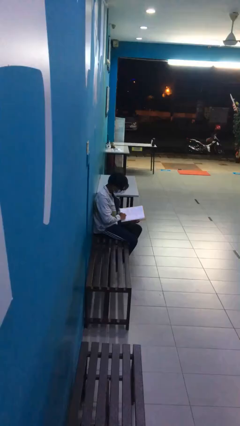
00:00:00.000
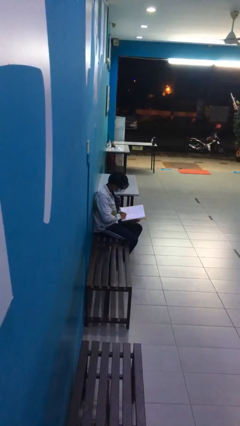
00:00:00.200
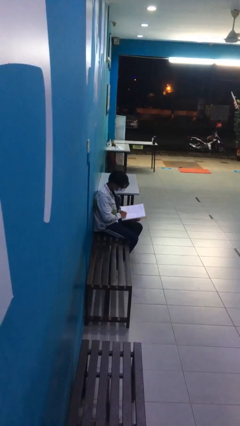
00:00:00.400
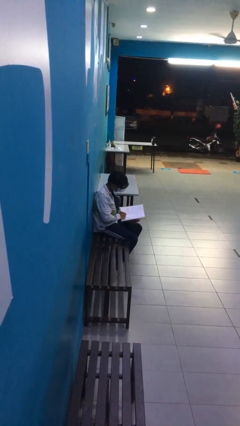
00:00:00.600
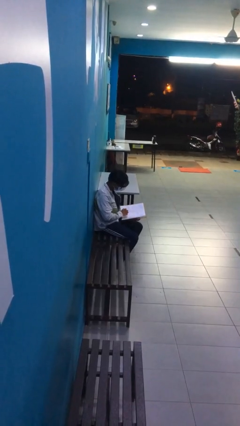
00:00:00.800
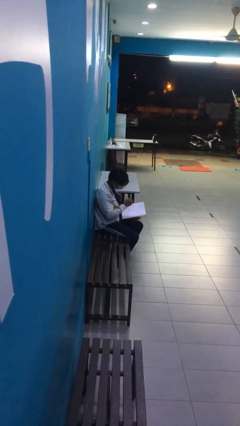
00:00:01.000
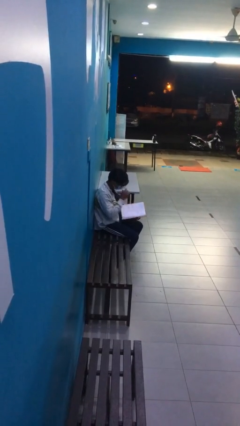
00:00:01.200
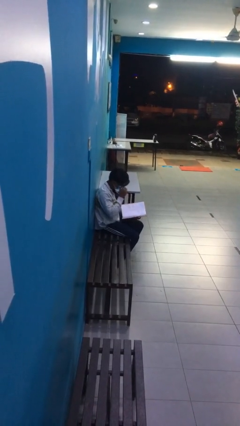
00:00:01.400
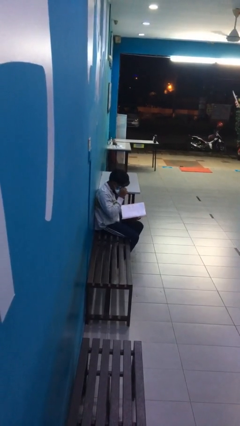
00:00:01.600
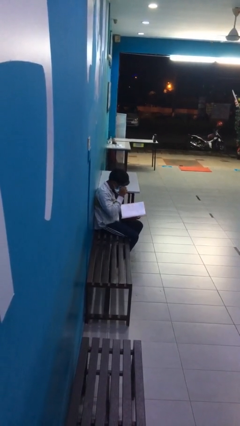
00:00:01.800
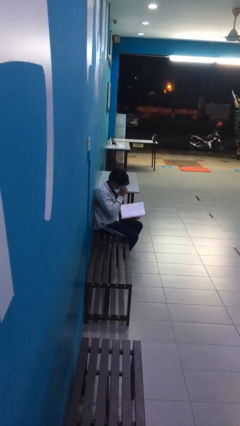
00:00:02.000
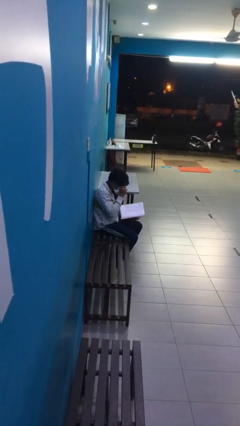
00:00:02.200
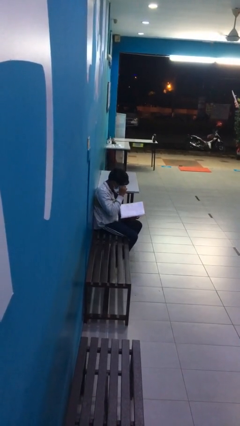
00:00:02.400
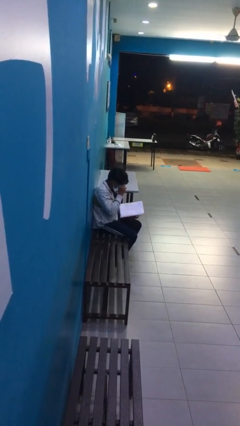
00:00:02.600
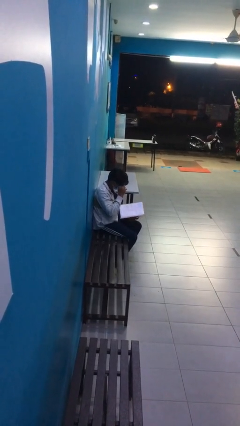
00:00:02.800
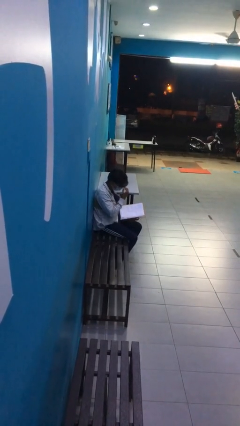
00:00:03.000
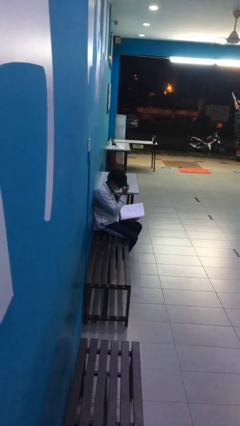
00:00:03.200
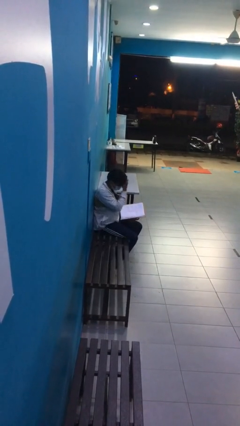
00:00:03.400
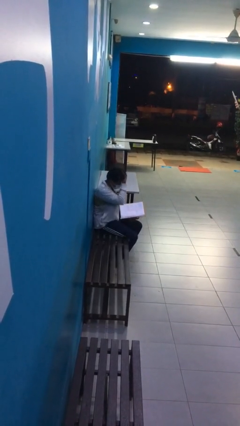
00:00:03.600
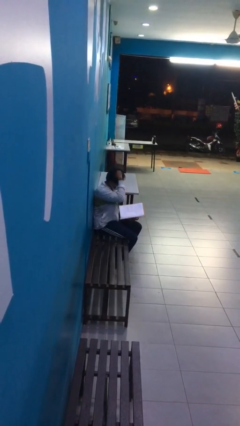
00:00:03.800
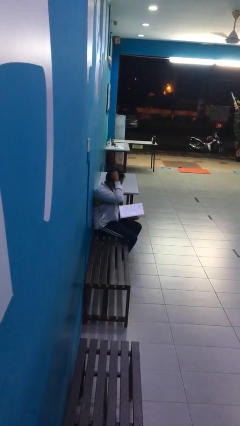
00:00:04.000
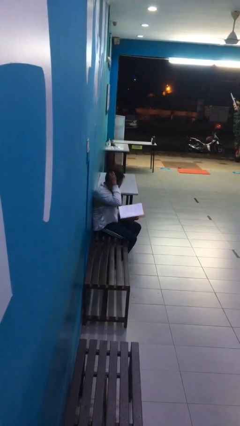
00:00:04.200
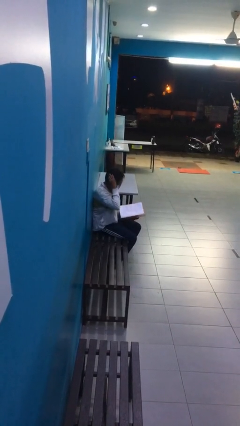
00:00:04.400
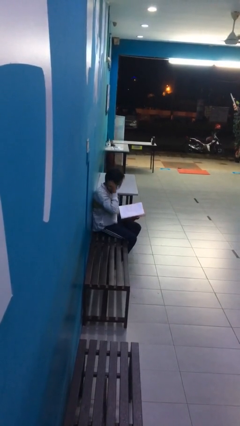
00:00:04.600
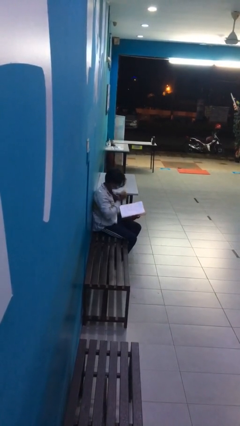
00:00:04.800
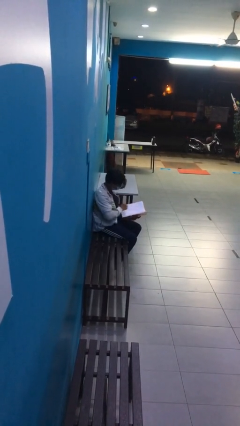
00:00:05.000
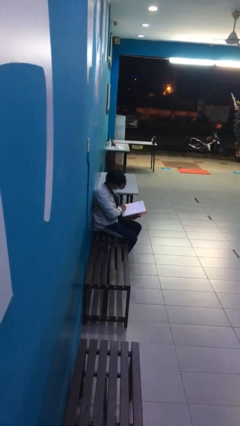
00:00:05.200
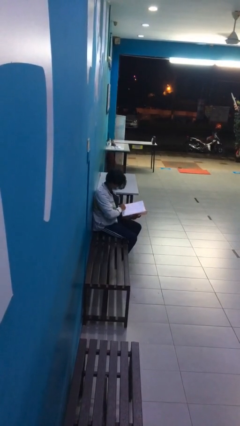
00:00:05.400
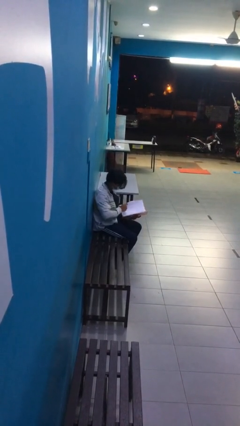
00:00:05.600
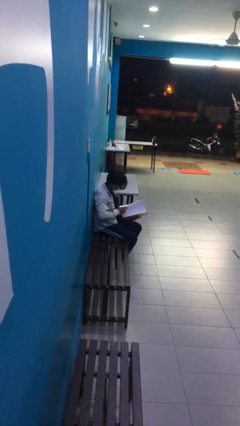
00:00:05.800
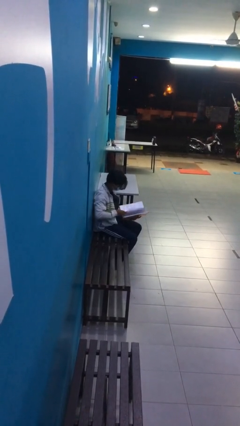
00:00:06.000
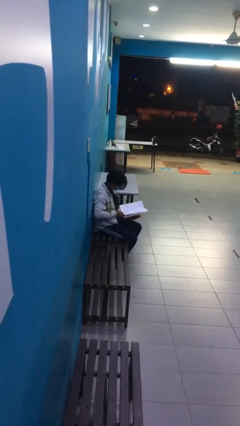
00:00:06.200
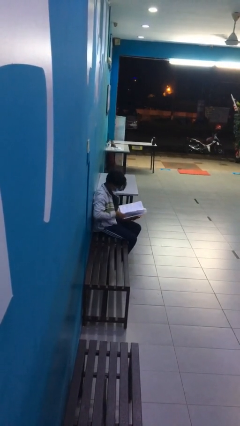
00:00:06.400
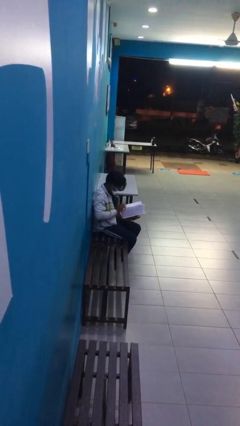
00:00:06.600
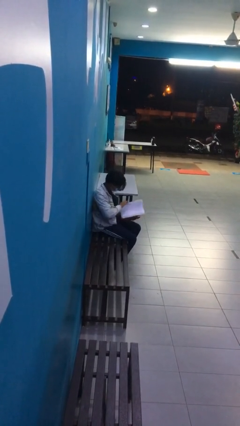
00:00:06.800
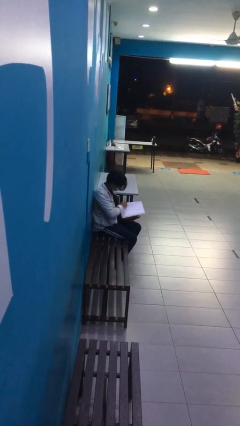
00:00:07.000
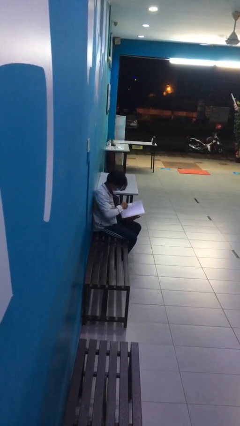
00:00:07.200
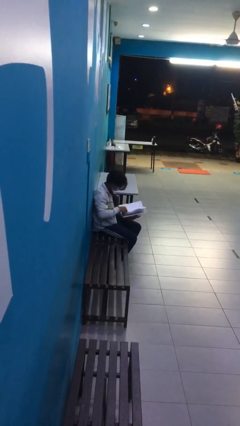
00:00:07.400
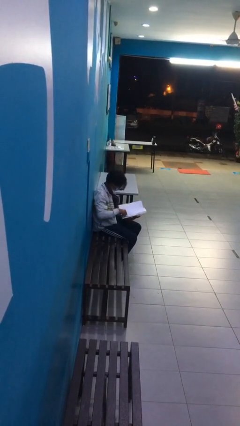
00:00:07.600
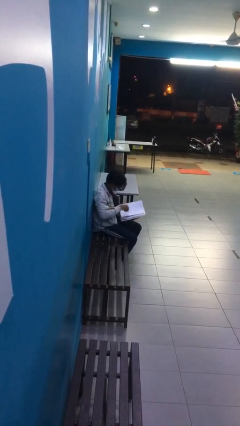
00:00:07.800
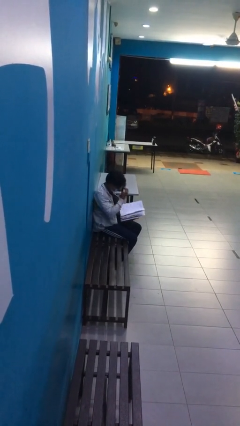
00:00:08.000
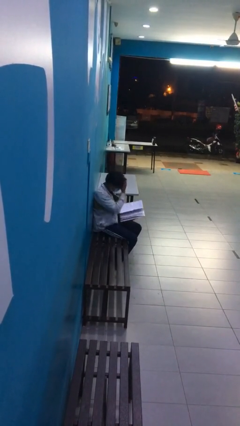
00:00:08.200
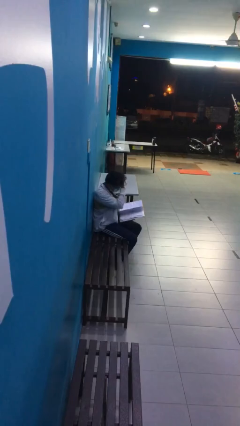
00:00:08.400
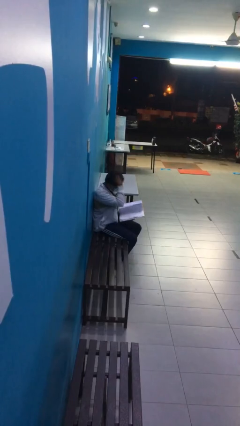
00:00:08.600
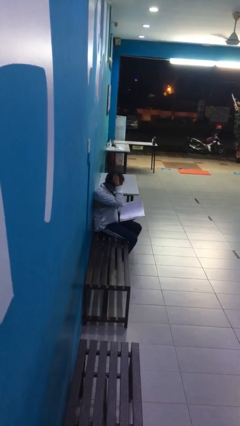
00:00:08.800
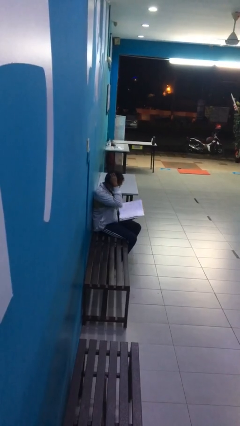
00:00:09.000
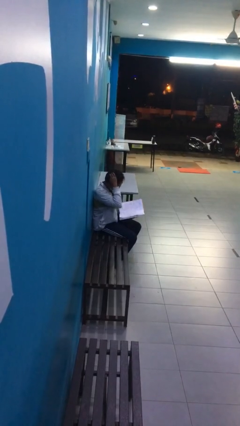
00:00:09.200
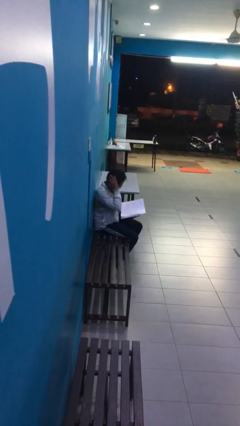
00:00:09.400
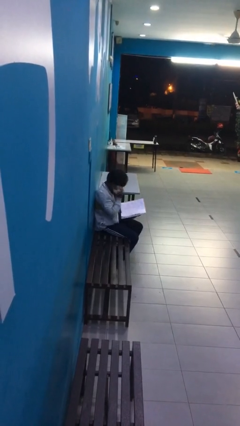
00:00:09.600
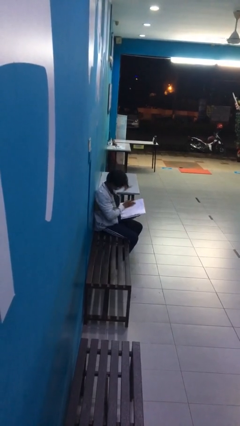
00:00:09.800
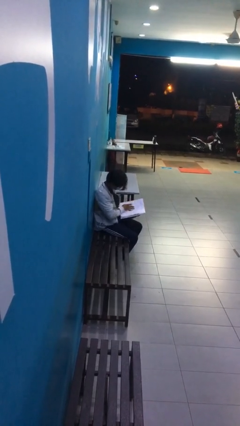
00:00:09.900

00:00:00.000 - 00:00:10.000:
person reads document

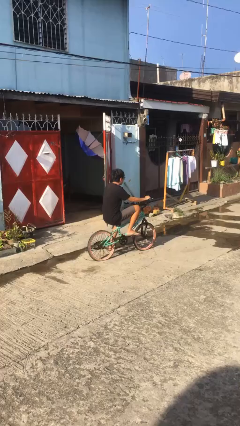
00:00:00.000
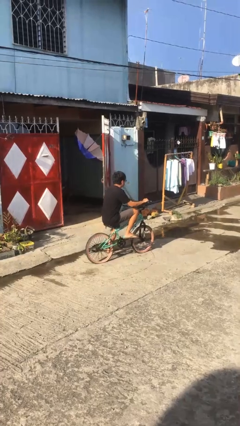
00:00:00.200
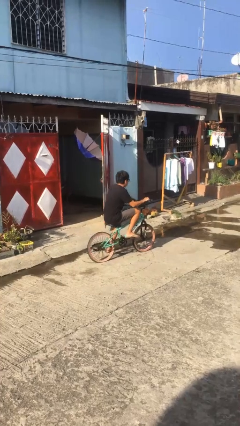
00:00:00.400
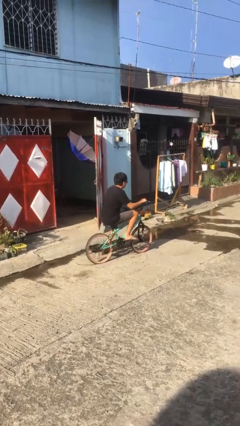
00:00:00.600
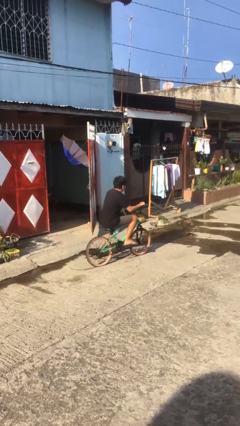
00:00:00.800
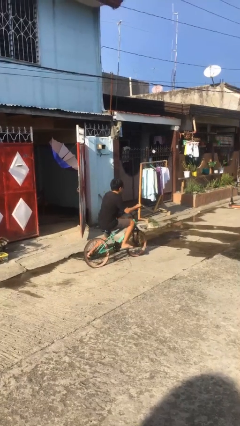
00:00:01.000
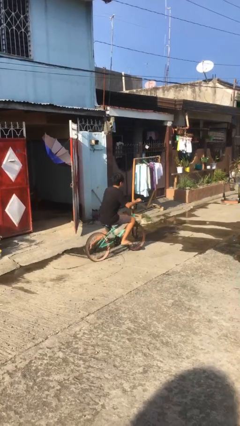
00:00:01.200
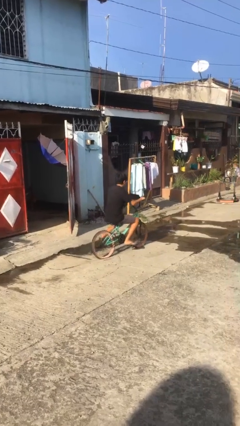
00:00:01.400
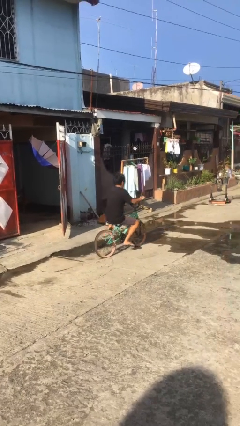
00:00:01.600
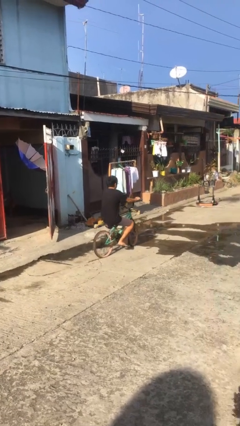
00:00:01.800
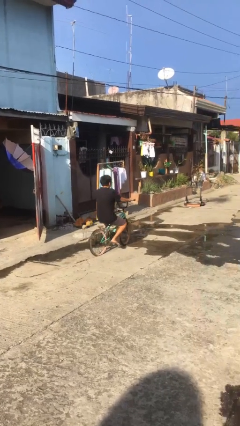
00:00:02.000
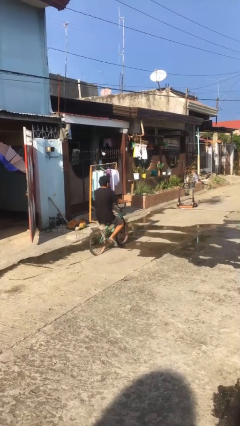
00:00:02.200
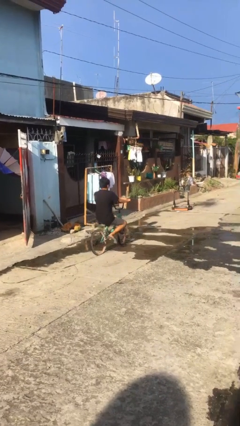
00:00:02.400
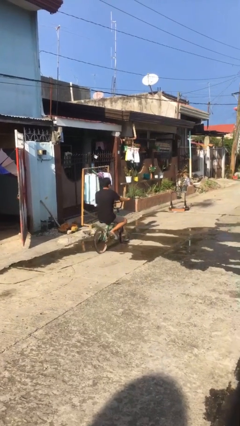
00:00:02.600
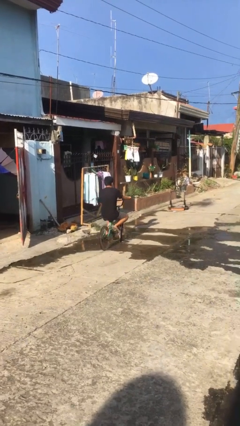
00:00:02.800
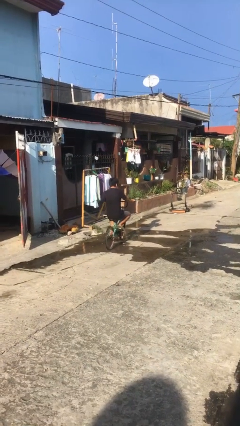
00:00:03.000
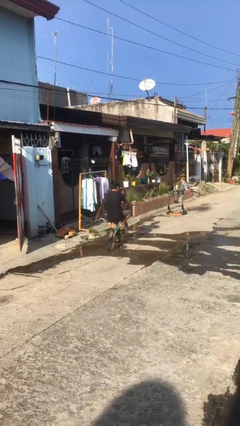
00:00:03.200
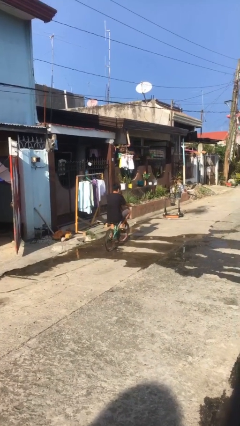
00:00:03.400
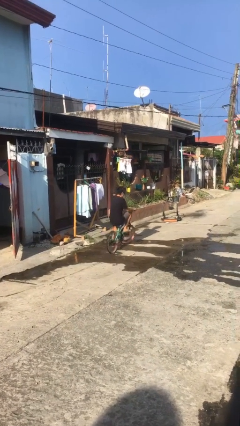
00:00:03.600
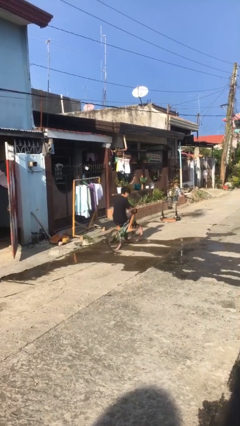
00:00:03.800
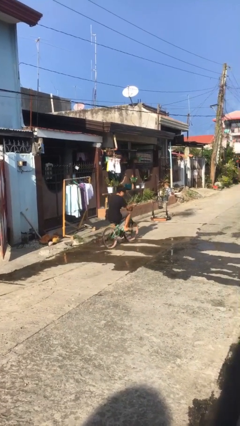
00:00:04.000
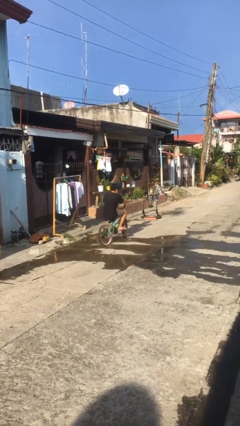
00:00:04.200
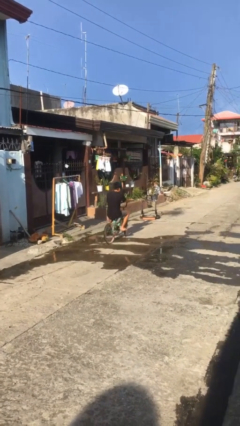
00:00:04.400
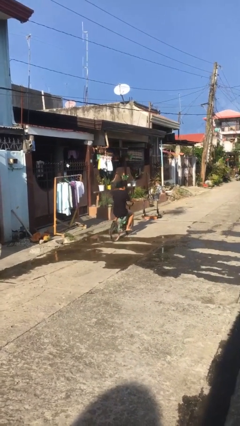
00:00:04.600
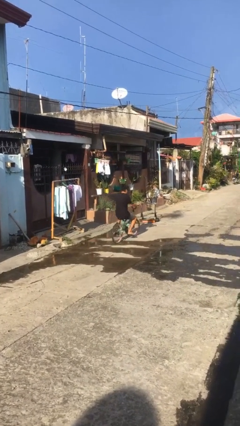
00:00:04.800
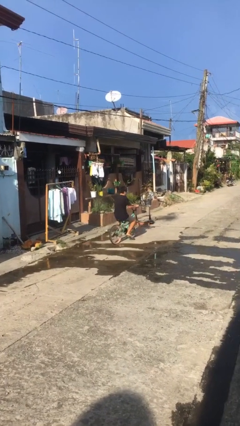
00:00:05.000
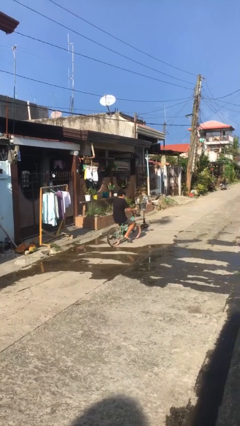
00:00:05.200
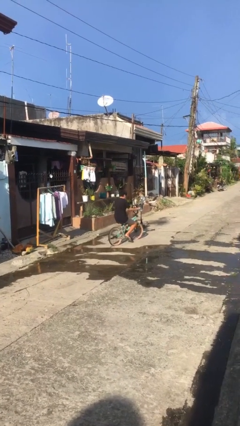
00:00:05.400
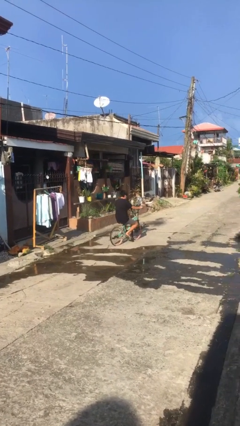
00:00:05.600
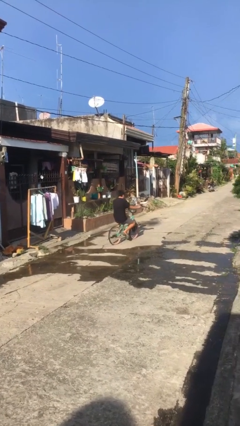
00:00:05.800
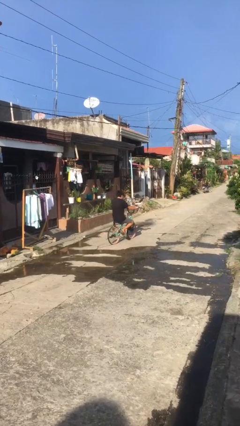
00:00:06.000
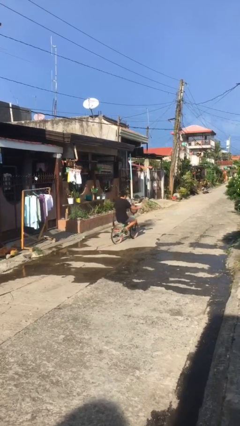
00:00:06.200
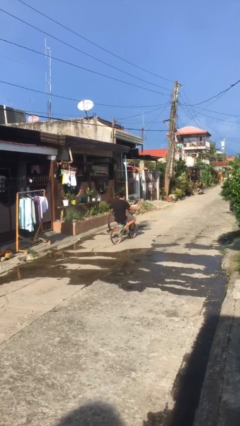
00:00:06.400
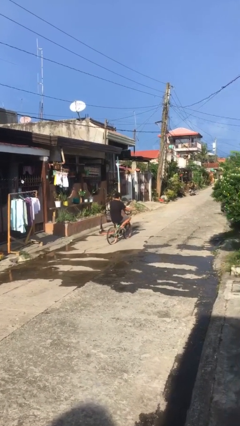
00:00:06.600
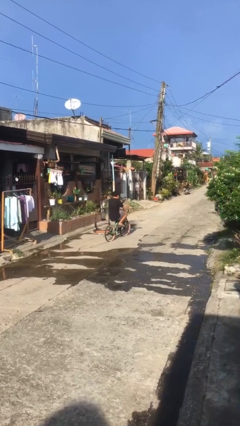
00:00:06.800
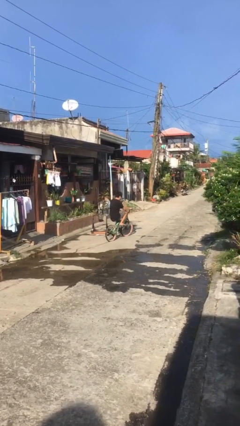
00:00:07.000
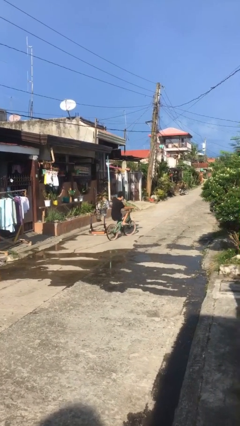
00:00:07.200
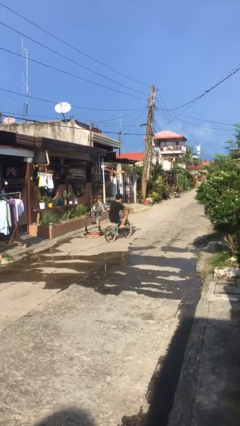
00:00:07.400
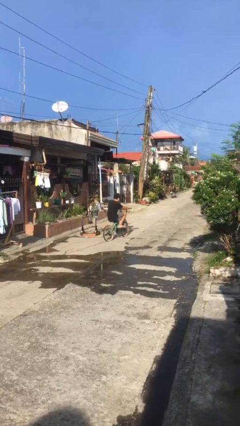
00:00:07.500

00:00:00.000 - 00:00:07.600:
person rides bicycle

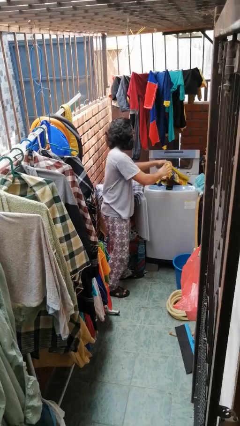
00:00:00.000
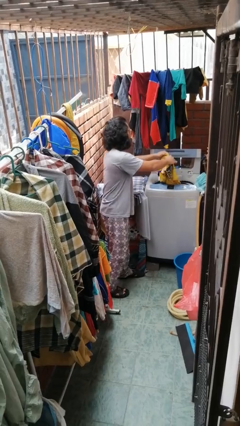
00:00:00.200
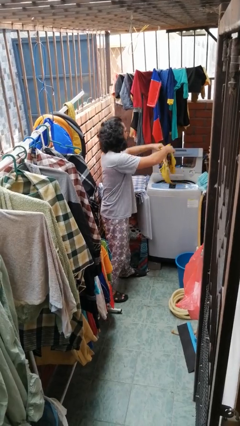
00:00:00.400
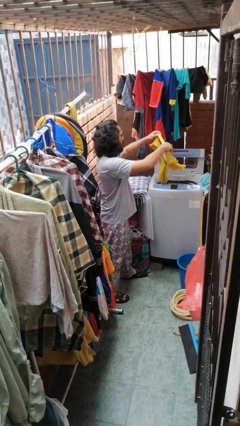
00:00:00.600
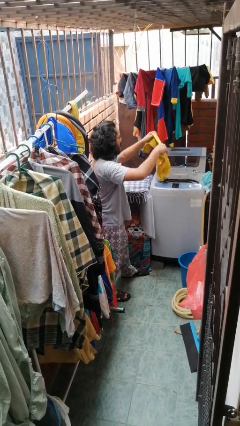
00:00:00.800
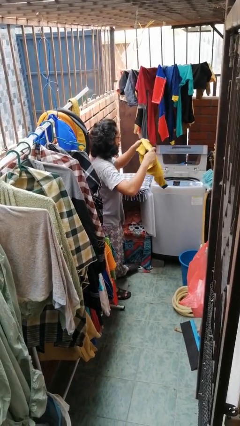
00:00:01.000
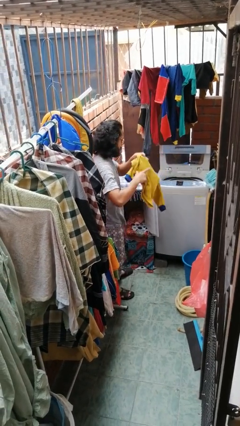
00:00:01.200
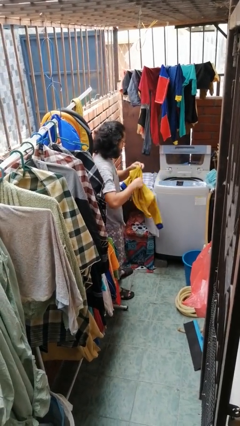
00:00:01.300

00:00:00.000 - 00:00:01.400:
person unloads clotheswasher
